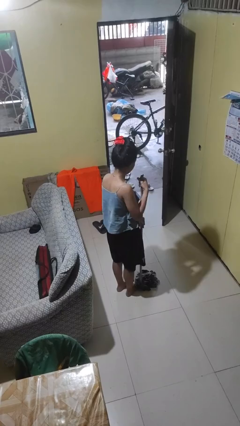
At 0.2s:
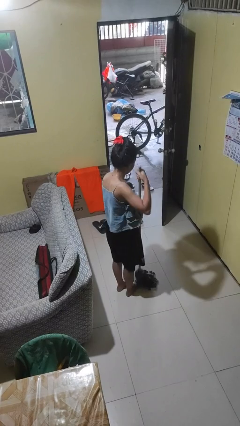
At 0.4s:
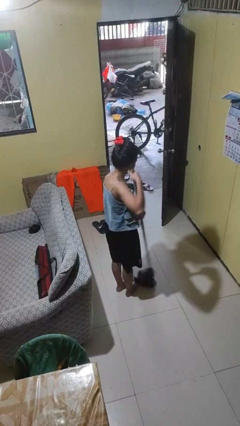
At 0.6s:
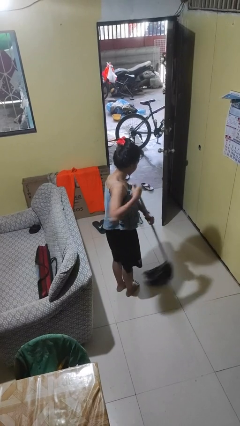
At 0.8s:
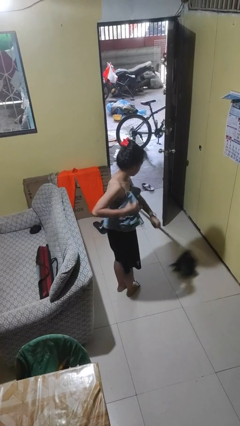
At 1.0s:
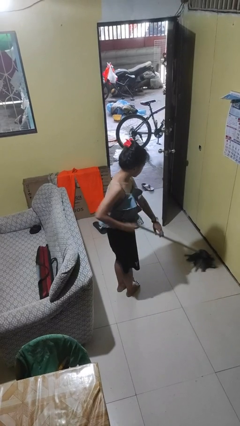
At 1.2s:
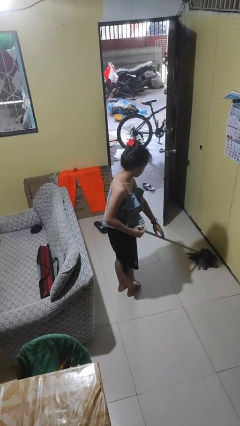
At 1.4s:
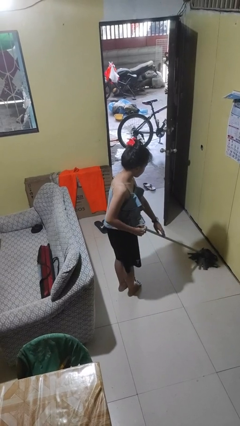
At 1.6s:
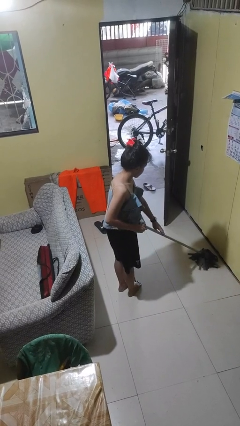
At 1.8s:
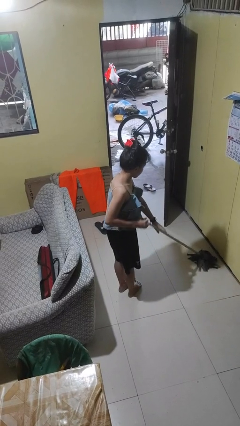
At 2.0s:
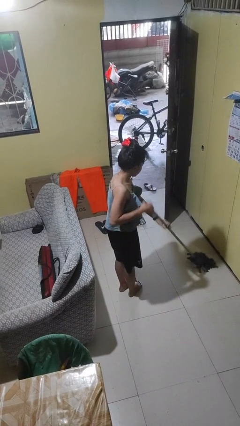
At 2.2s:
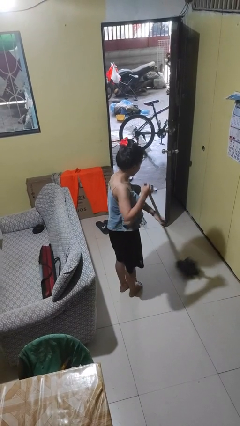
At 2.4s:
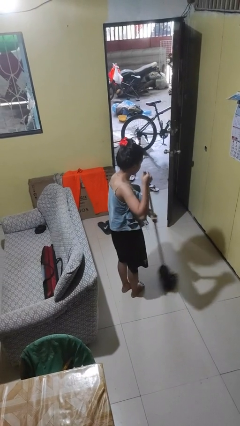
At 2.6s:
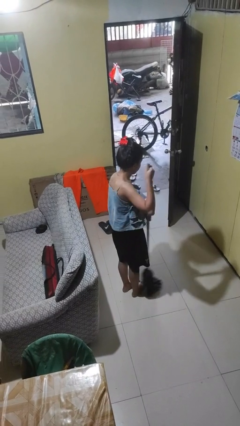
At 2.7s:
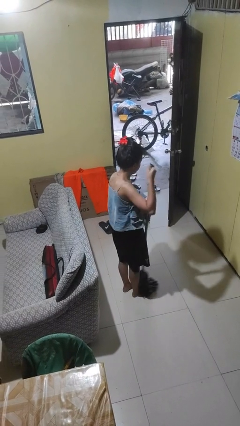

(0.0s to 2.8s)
person mops

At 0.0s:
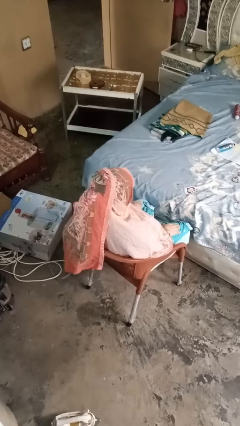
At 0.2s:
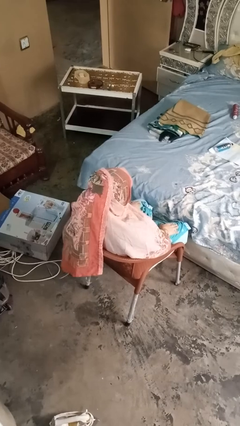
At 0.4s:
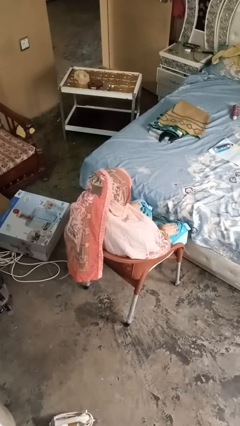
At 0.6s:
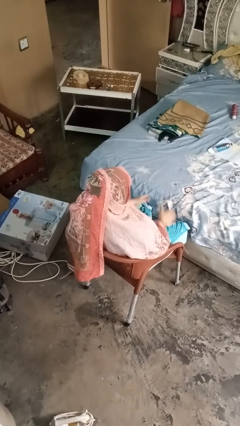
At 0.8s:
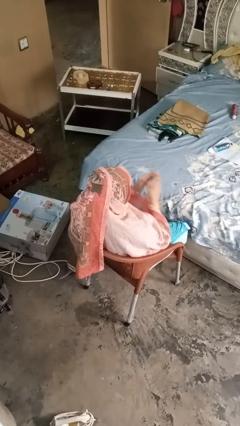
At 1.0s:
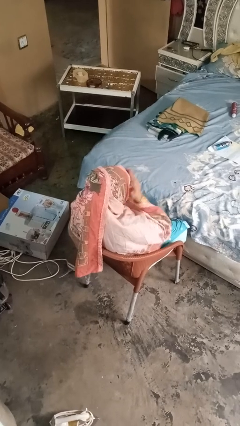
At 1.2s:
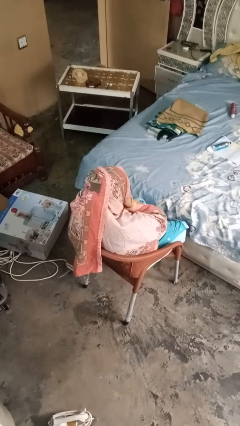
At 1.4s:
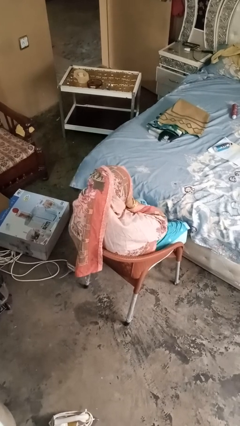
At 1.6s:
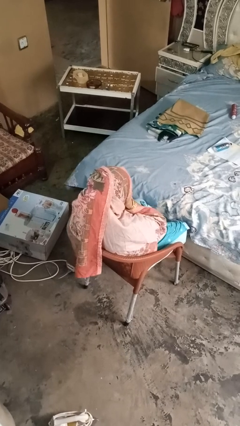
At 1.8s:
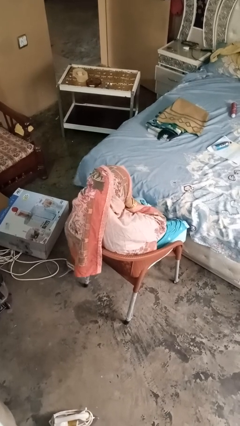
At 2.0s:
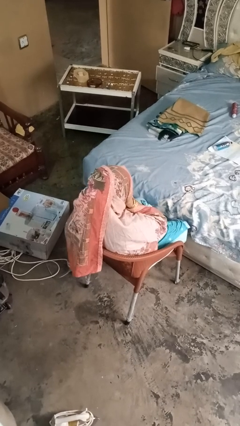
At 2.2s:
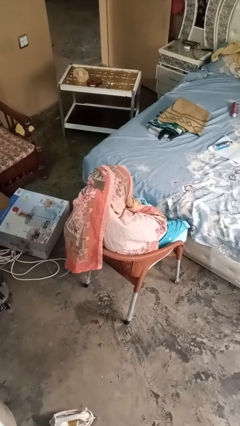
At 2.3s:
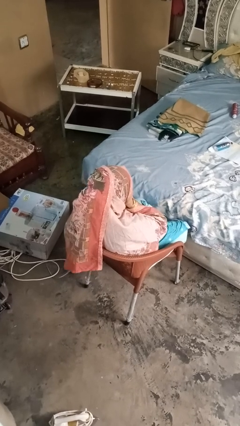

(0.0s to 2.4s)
person covers face with hands

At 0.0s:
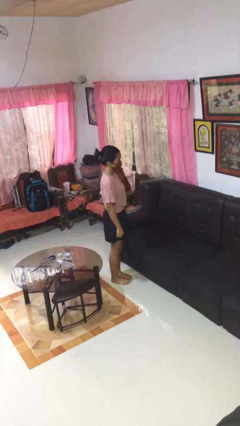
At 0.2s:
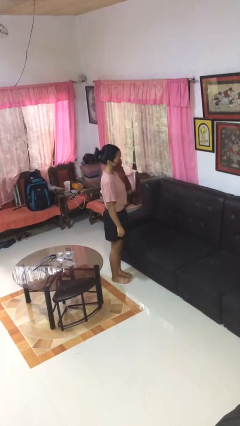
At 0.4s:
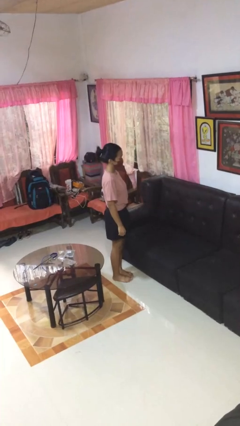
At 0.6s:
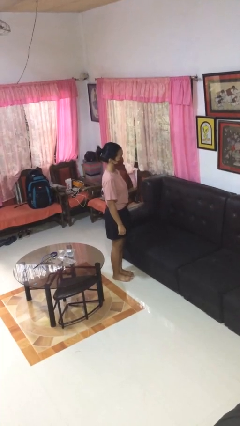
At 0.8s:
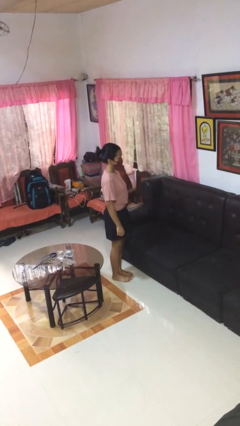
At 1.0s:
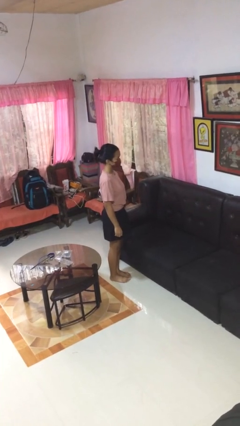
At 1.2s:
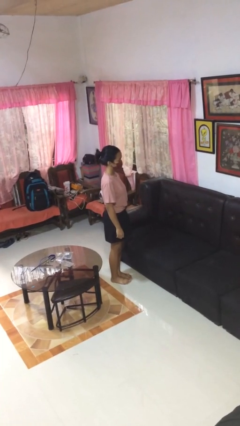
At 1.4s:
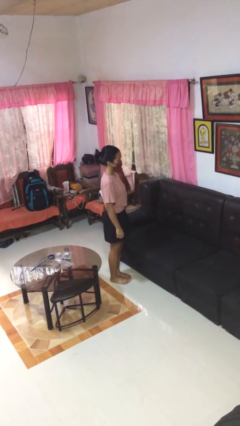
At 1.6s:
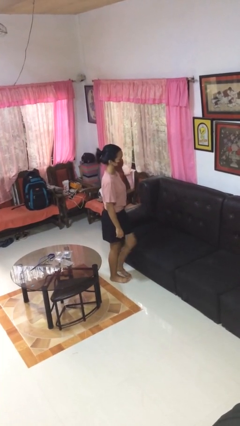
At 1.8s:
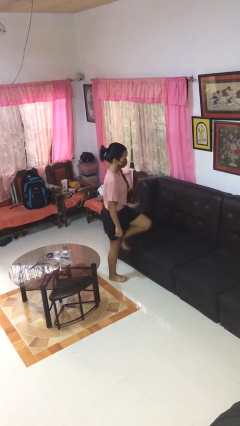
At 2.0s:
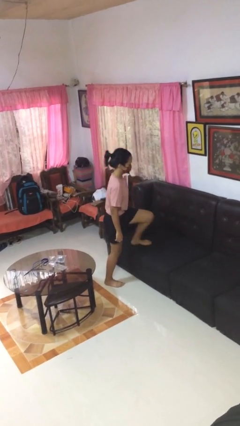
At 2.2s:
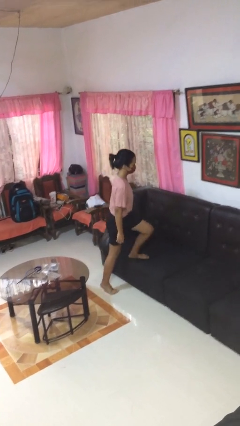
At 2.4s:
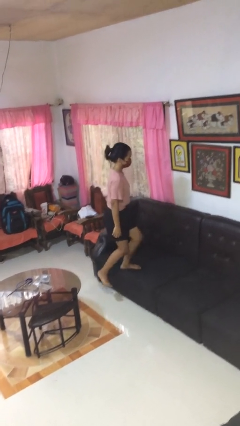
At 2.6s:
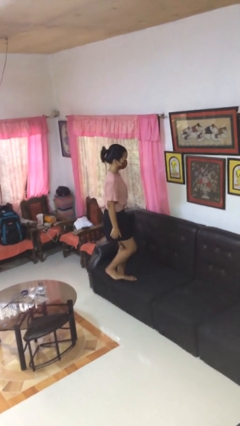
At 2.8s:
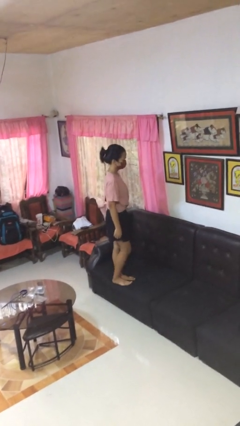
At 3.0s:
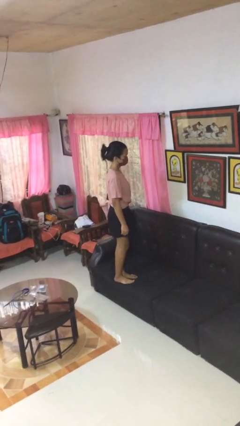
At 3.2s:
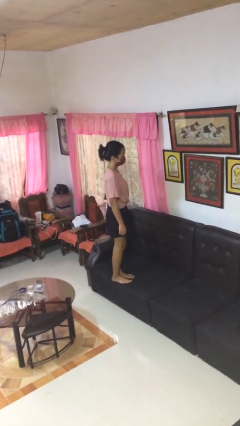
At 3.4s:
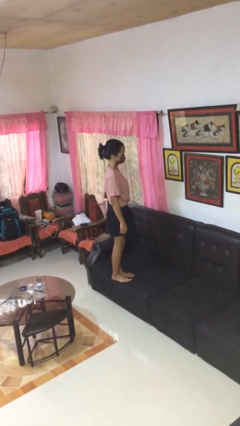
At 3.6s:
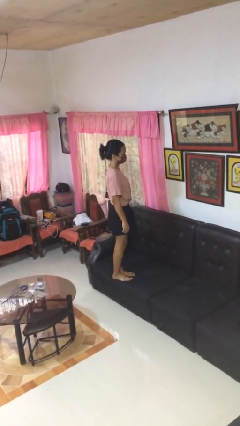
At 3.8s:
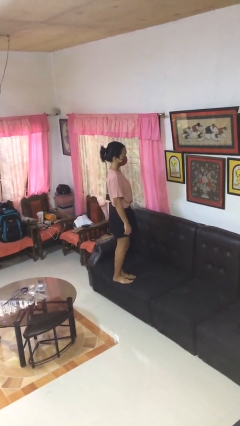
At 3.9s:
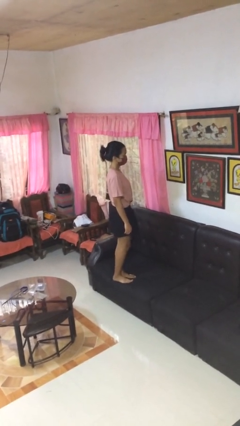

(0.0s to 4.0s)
person climbs on couch

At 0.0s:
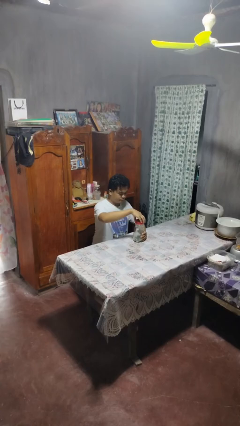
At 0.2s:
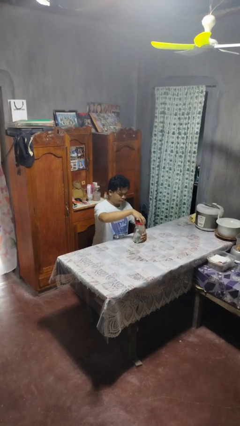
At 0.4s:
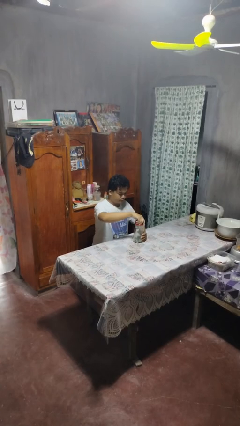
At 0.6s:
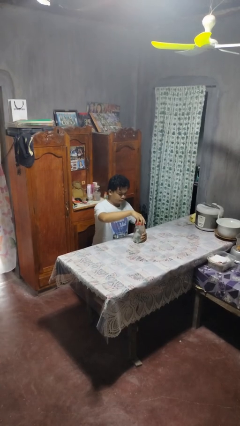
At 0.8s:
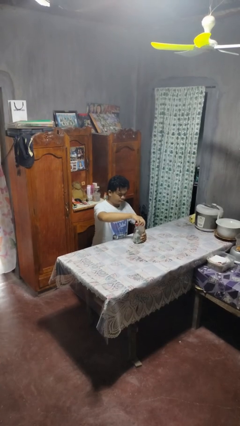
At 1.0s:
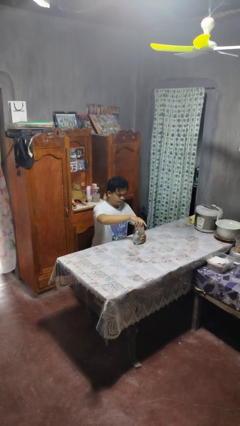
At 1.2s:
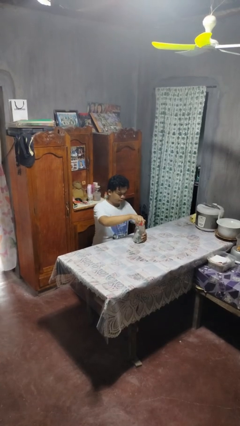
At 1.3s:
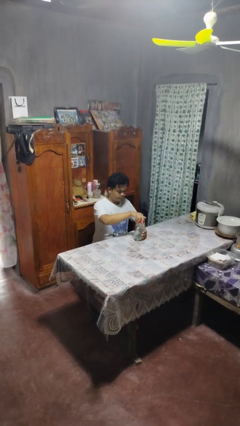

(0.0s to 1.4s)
person closes jar

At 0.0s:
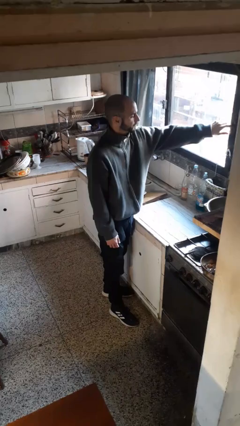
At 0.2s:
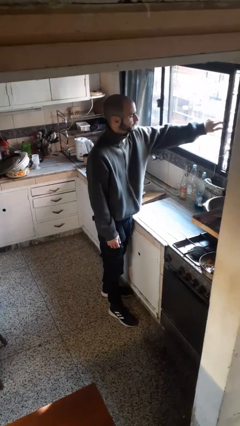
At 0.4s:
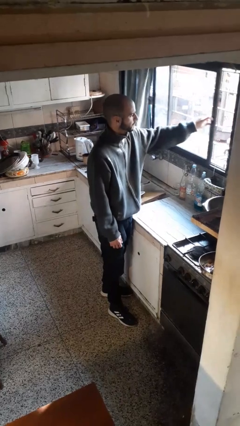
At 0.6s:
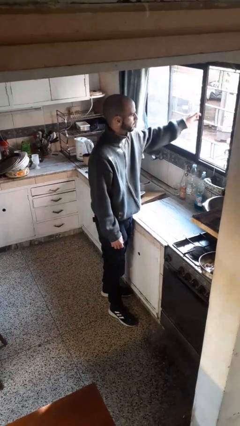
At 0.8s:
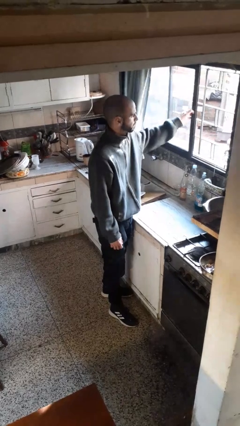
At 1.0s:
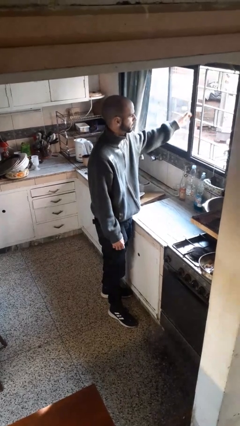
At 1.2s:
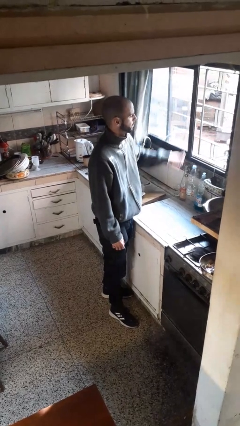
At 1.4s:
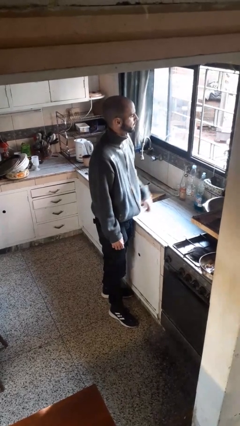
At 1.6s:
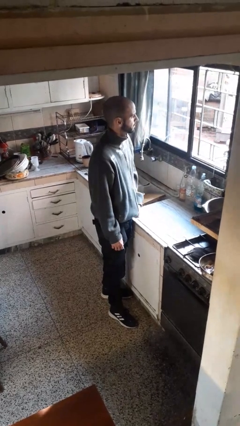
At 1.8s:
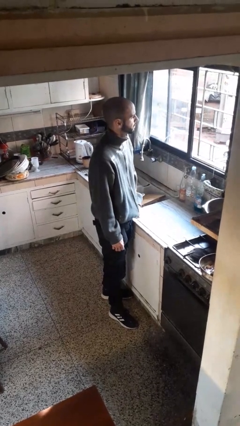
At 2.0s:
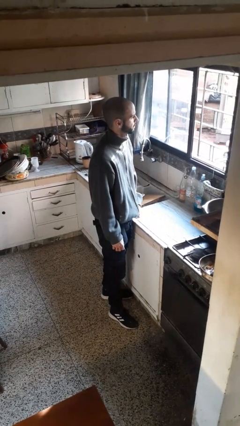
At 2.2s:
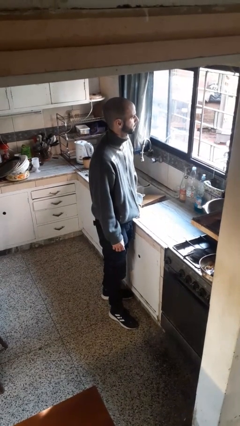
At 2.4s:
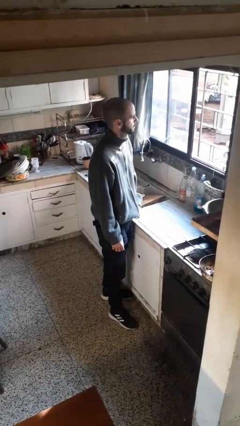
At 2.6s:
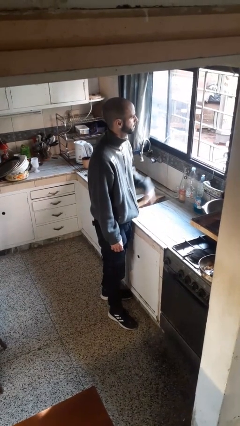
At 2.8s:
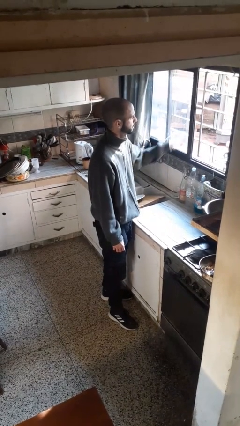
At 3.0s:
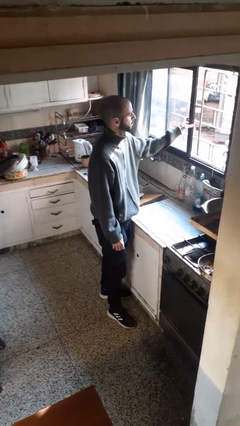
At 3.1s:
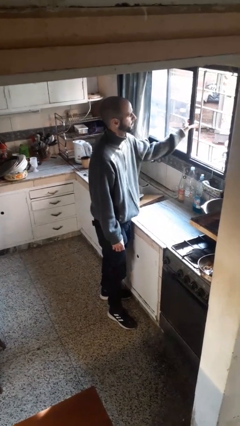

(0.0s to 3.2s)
person opens home window

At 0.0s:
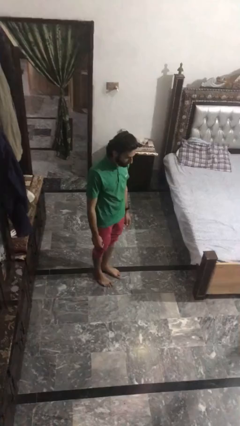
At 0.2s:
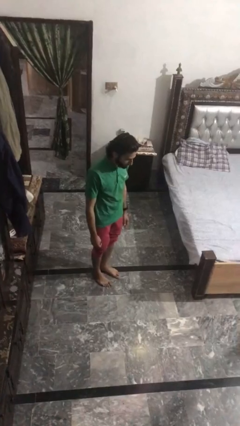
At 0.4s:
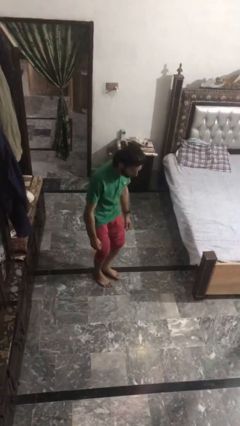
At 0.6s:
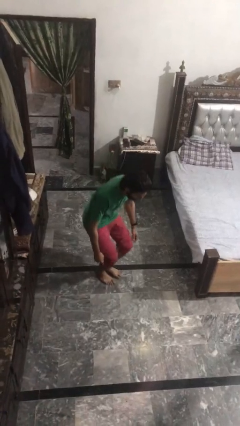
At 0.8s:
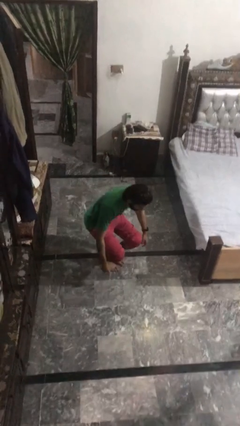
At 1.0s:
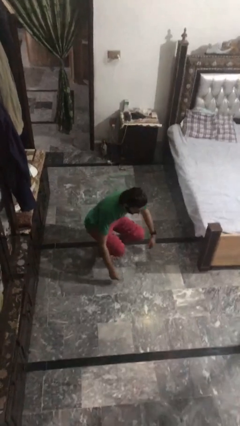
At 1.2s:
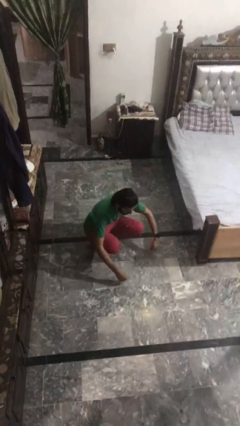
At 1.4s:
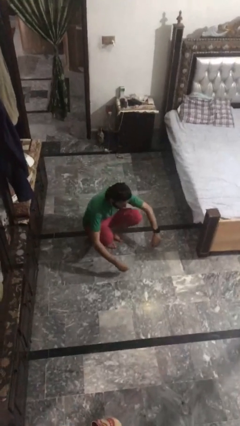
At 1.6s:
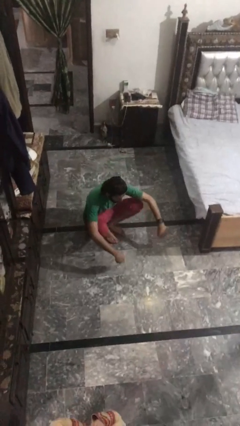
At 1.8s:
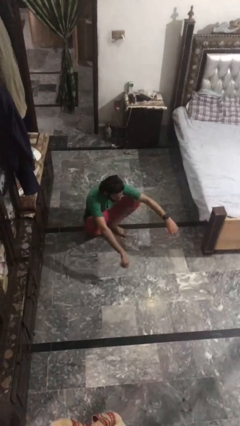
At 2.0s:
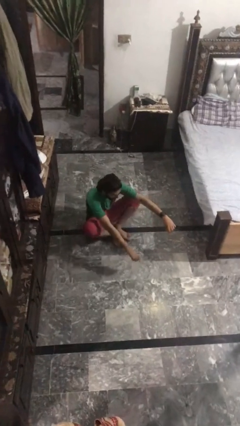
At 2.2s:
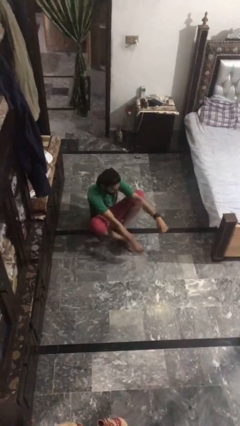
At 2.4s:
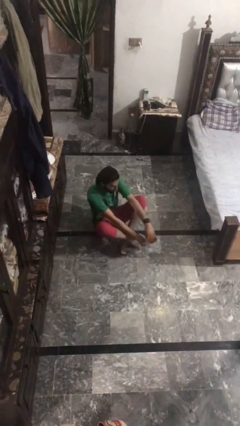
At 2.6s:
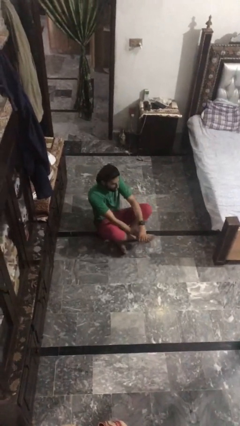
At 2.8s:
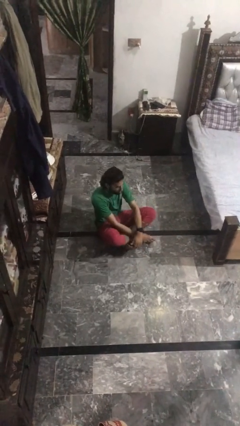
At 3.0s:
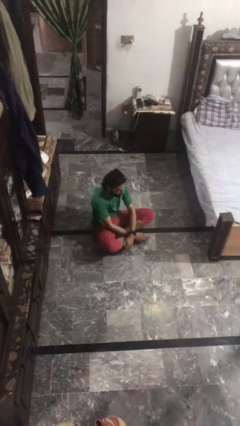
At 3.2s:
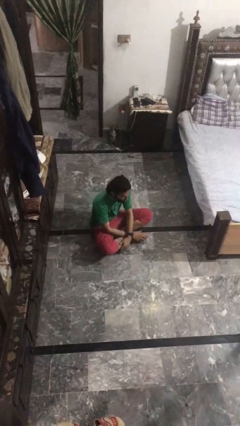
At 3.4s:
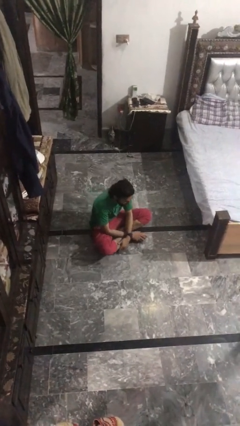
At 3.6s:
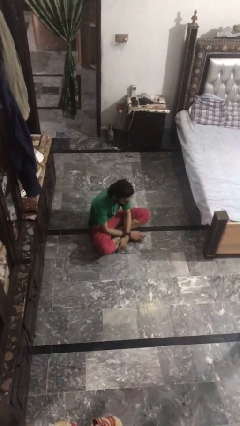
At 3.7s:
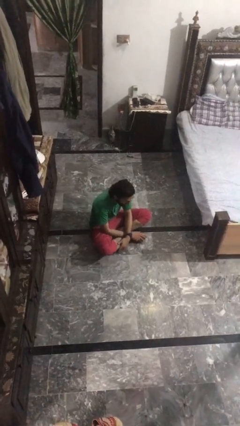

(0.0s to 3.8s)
person sits crisscross
